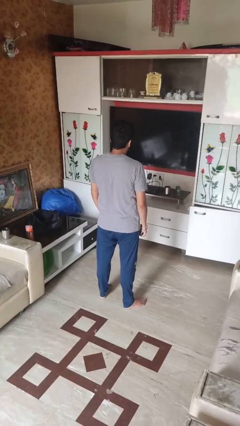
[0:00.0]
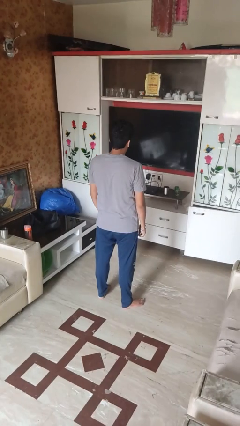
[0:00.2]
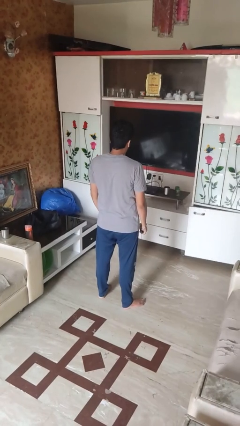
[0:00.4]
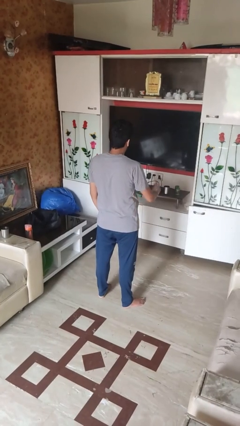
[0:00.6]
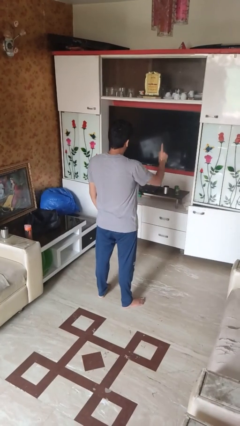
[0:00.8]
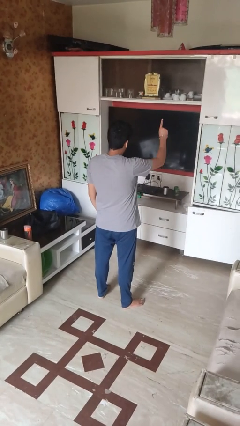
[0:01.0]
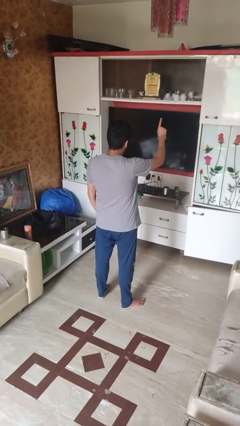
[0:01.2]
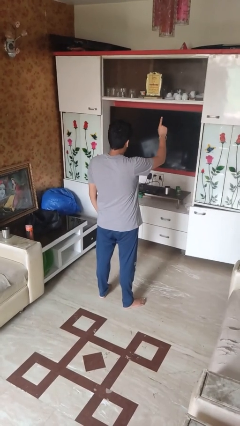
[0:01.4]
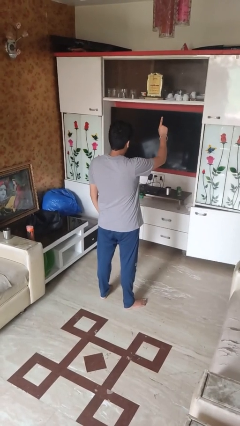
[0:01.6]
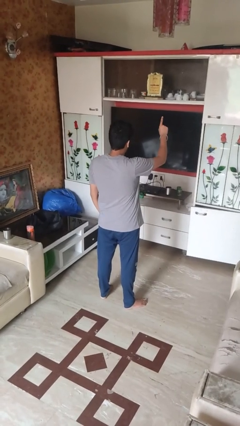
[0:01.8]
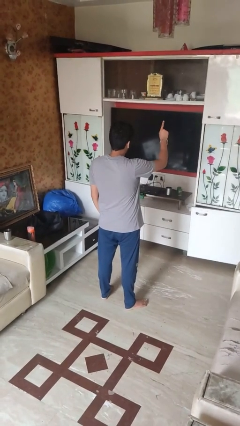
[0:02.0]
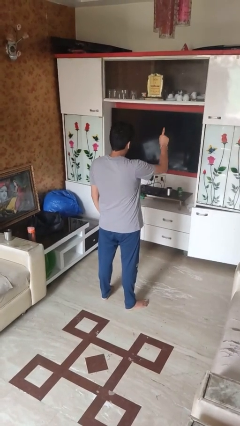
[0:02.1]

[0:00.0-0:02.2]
person gestures number one

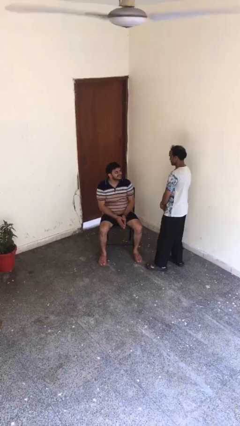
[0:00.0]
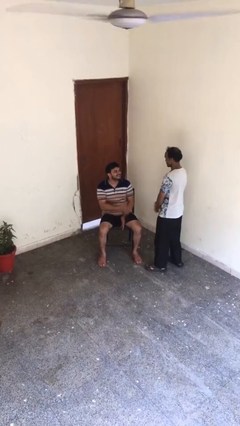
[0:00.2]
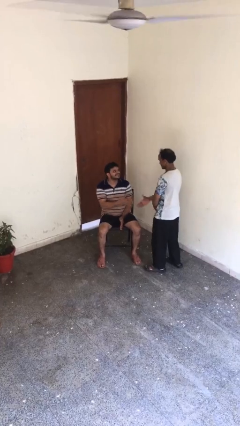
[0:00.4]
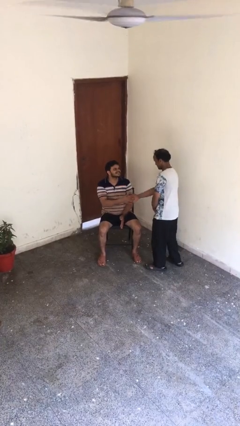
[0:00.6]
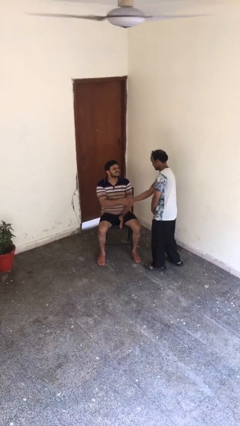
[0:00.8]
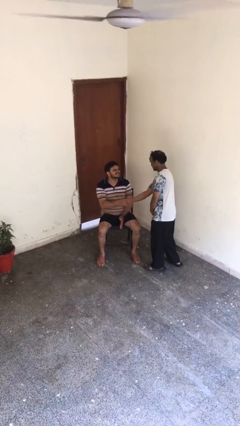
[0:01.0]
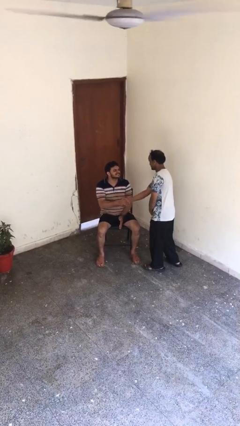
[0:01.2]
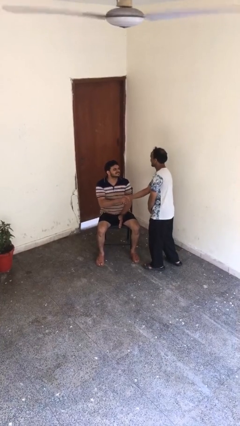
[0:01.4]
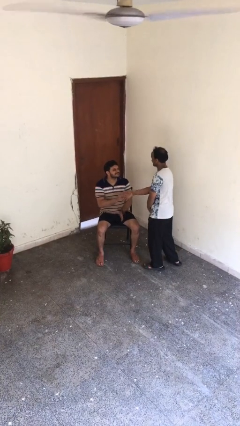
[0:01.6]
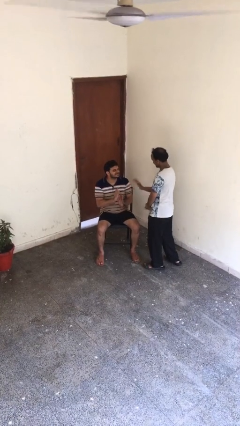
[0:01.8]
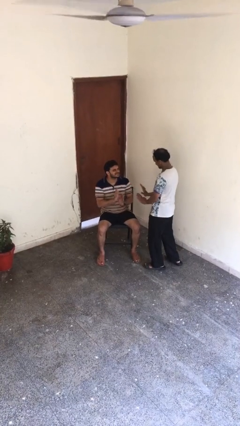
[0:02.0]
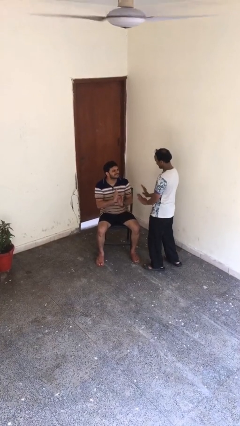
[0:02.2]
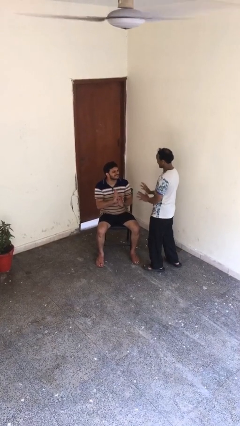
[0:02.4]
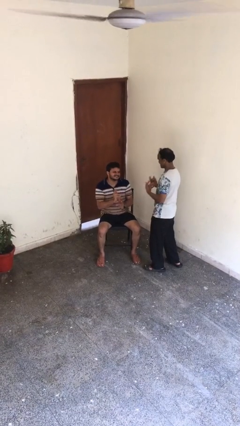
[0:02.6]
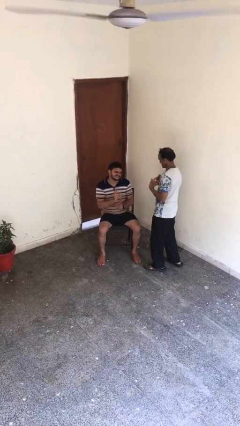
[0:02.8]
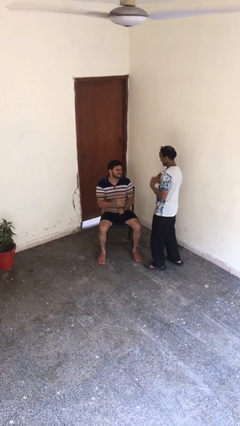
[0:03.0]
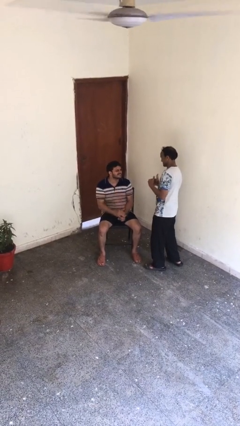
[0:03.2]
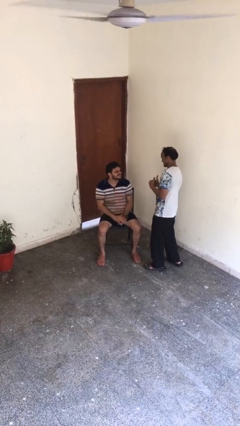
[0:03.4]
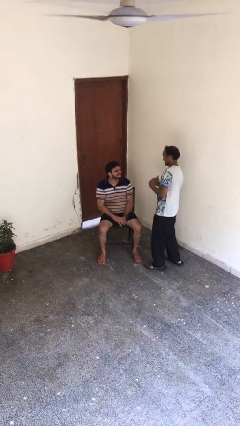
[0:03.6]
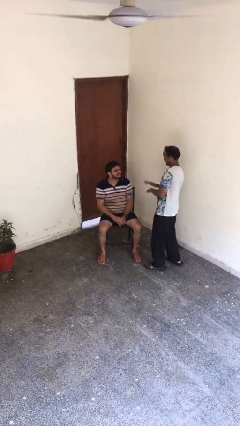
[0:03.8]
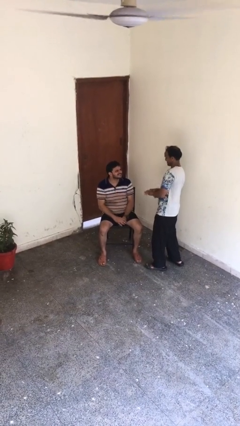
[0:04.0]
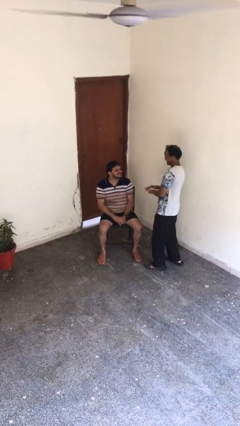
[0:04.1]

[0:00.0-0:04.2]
person shakes hand

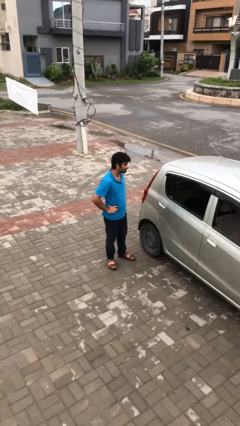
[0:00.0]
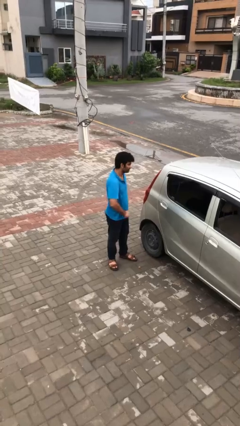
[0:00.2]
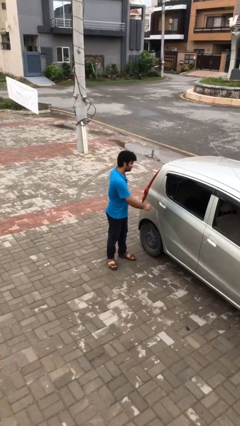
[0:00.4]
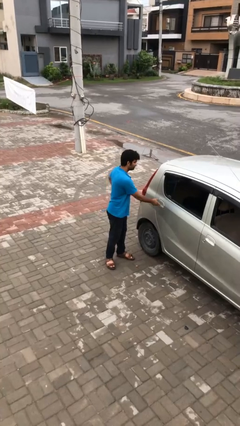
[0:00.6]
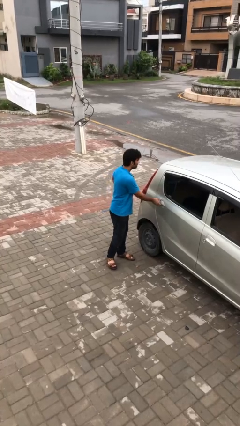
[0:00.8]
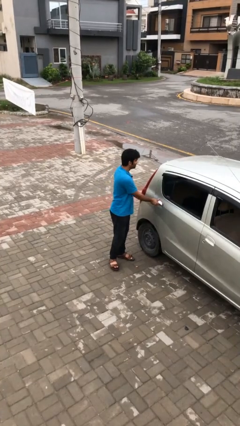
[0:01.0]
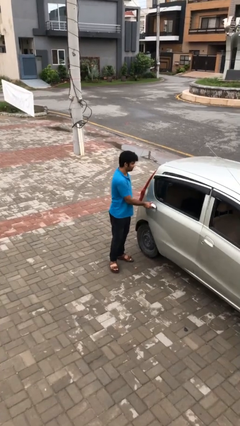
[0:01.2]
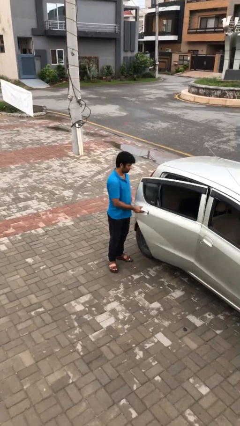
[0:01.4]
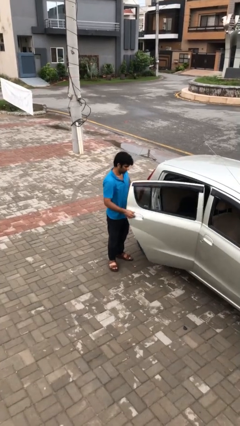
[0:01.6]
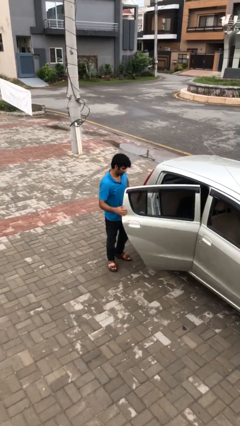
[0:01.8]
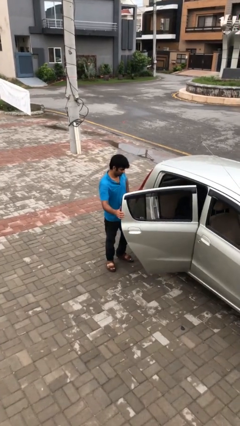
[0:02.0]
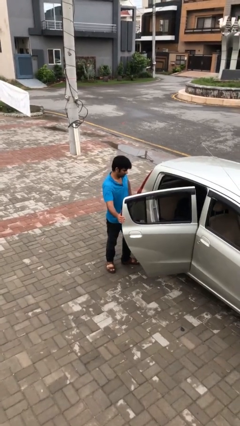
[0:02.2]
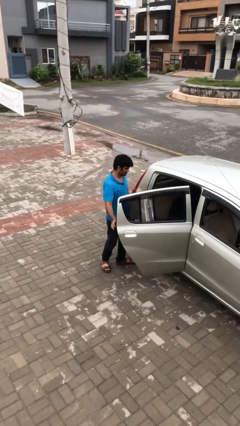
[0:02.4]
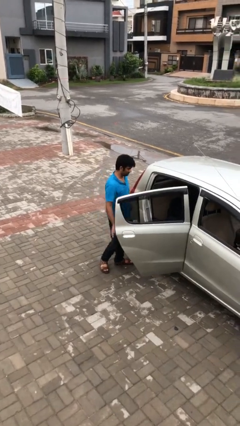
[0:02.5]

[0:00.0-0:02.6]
person opens car door

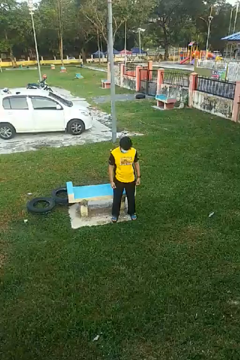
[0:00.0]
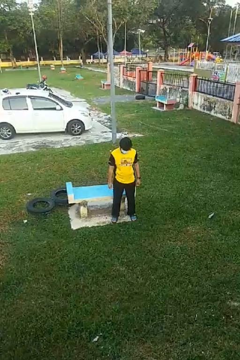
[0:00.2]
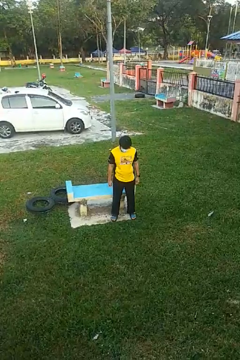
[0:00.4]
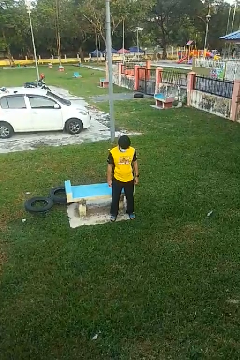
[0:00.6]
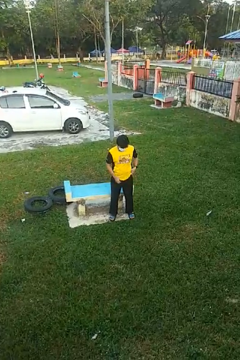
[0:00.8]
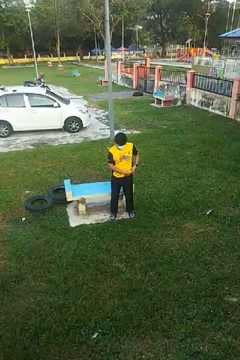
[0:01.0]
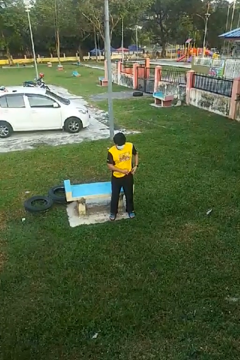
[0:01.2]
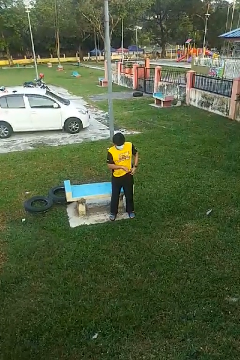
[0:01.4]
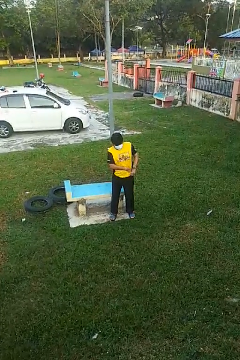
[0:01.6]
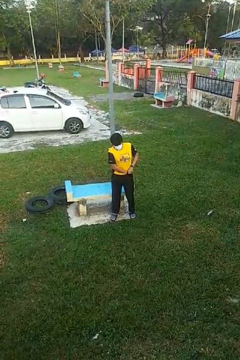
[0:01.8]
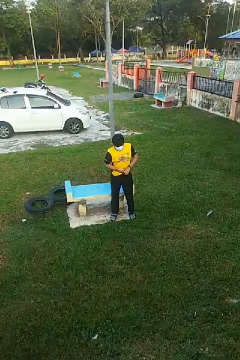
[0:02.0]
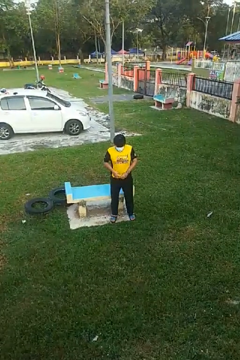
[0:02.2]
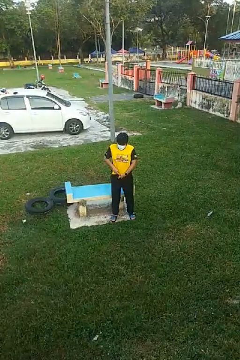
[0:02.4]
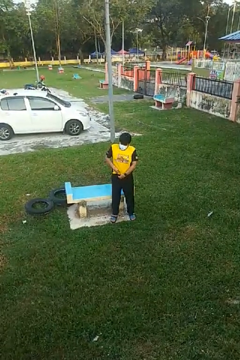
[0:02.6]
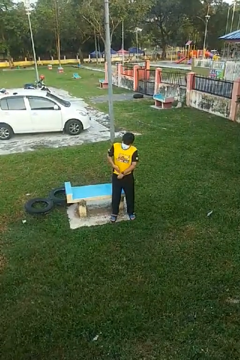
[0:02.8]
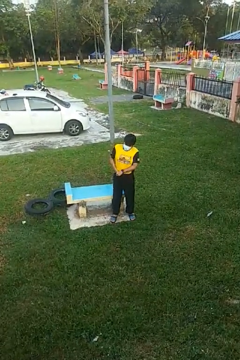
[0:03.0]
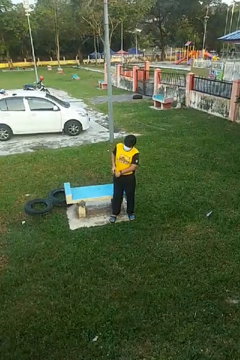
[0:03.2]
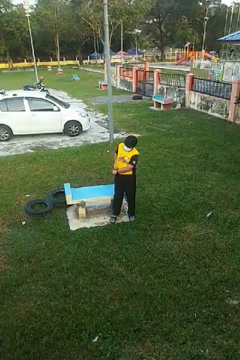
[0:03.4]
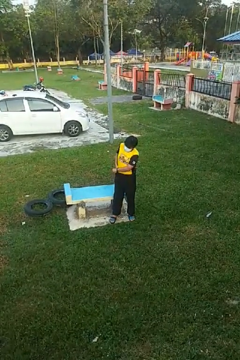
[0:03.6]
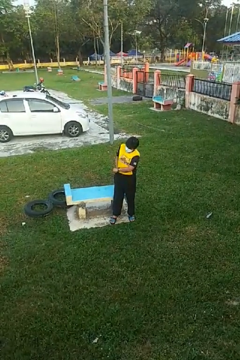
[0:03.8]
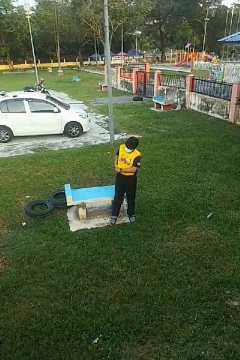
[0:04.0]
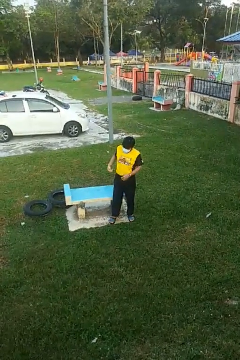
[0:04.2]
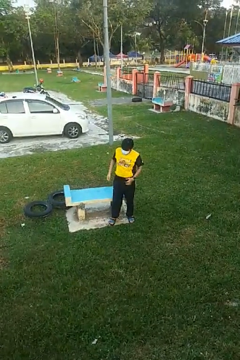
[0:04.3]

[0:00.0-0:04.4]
person tucks in shirt

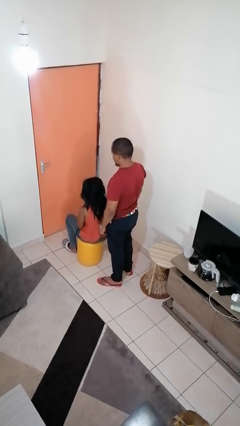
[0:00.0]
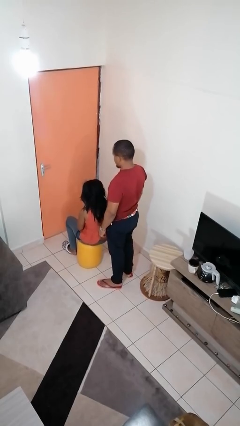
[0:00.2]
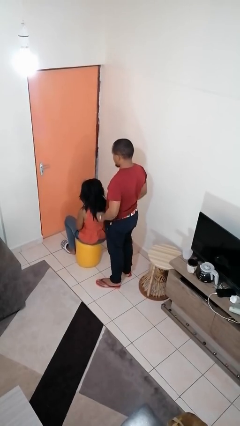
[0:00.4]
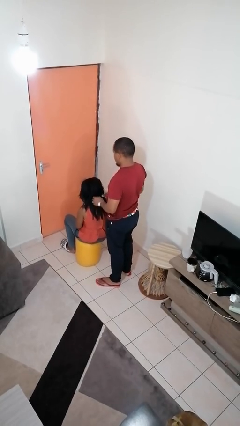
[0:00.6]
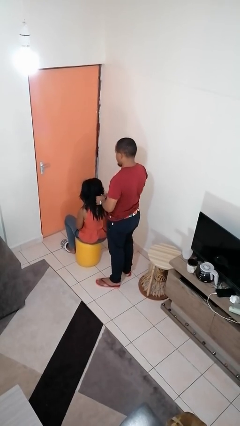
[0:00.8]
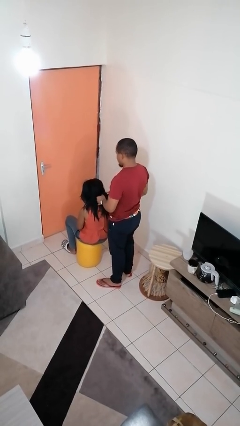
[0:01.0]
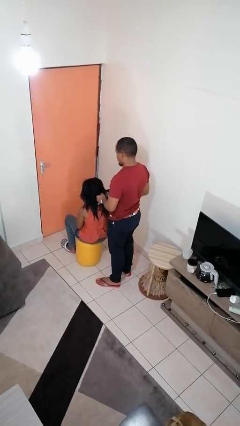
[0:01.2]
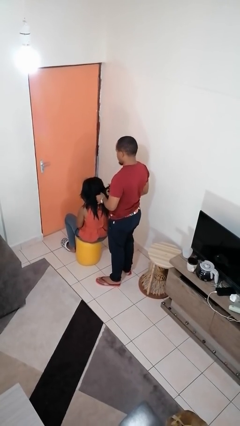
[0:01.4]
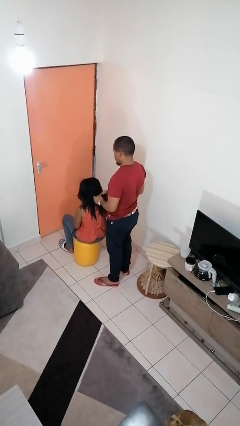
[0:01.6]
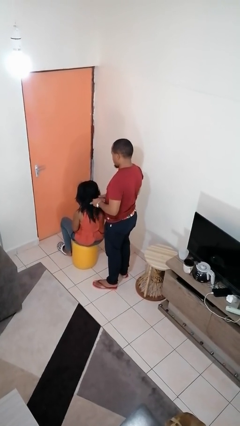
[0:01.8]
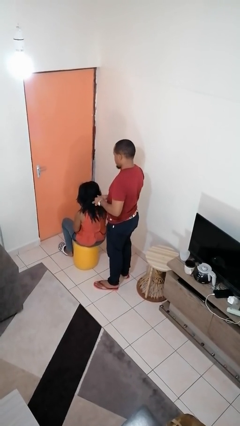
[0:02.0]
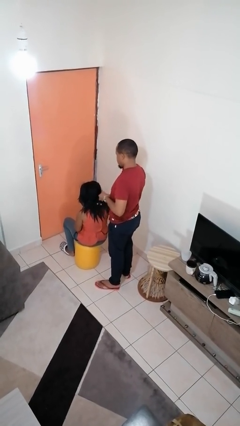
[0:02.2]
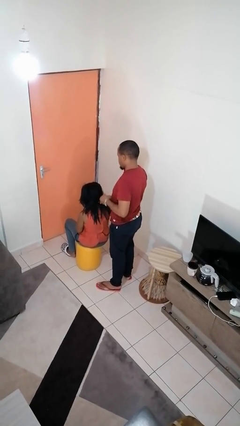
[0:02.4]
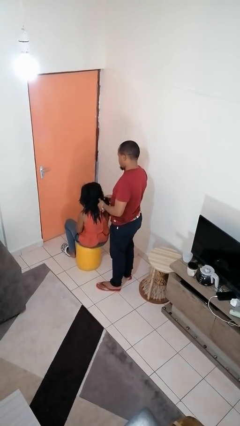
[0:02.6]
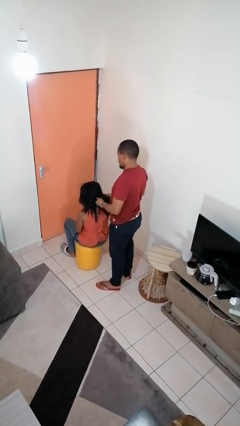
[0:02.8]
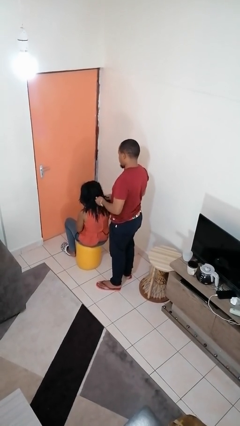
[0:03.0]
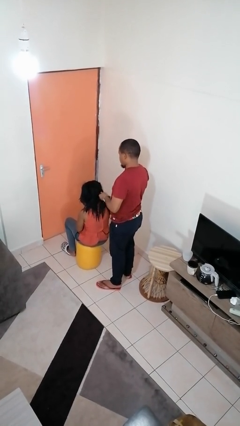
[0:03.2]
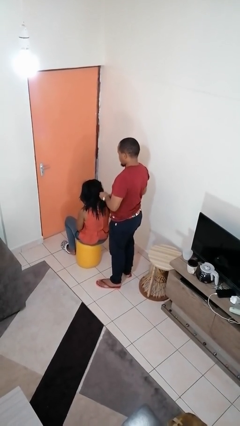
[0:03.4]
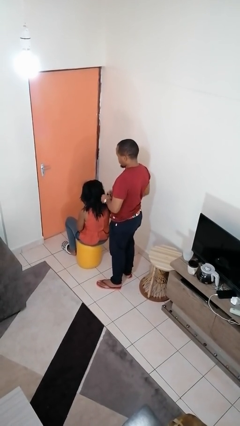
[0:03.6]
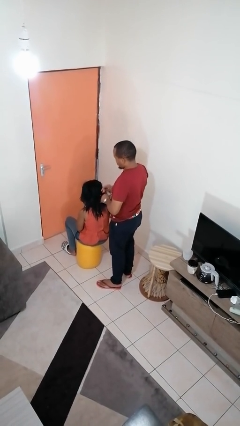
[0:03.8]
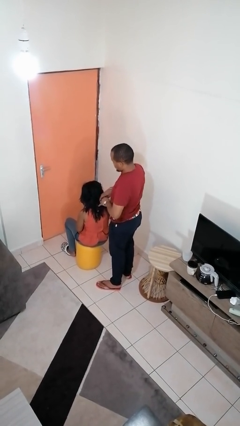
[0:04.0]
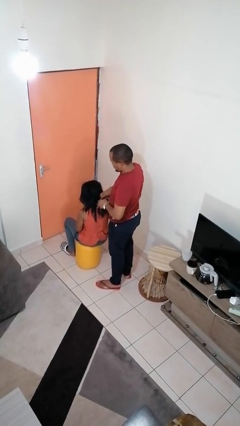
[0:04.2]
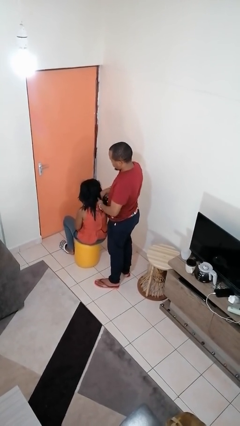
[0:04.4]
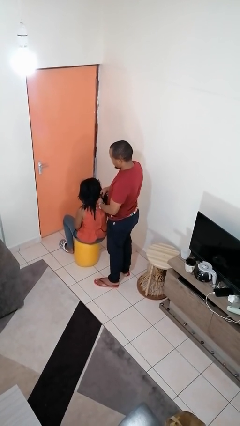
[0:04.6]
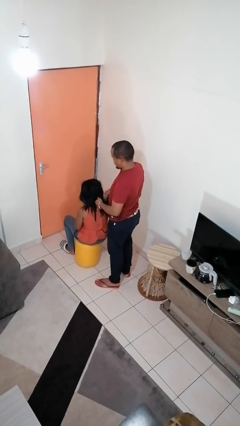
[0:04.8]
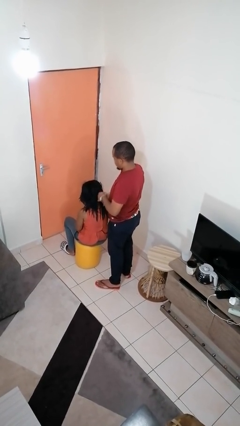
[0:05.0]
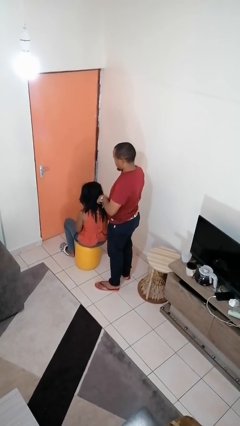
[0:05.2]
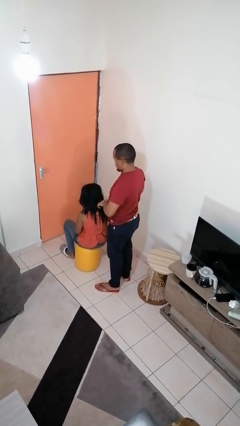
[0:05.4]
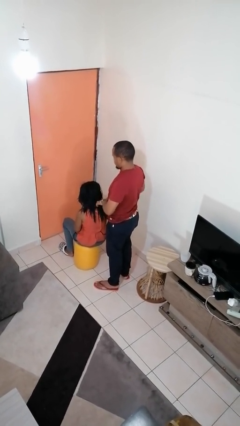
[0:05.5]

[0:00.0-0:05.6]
person braids hair of person
